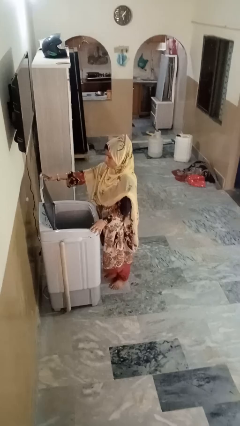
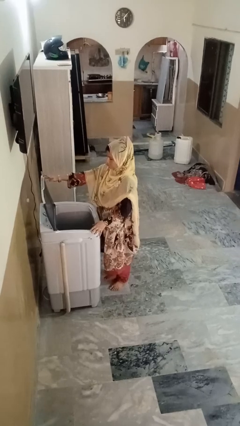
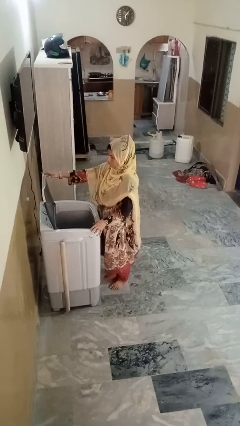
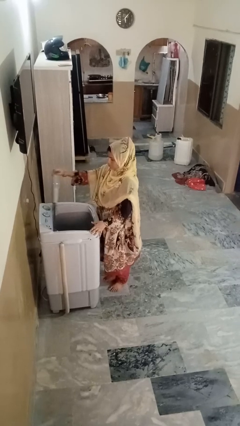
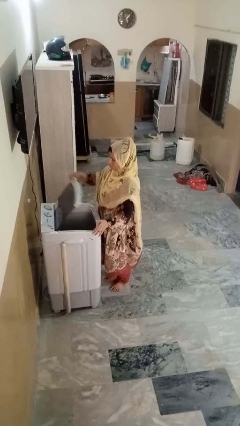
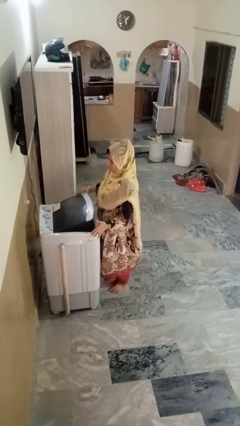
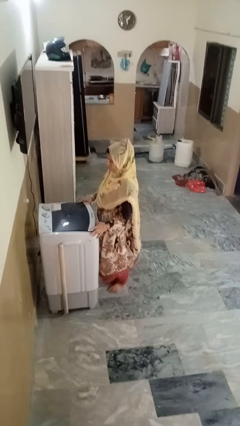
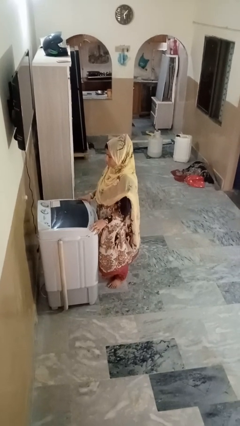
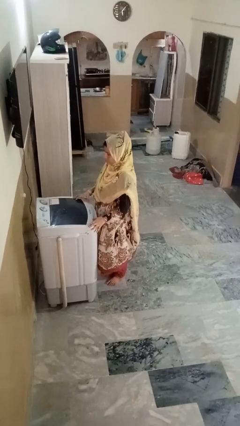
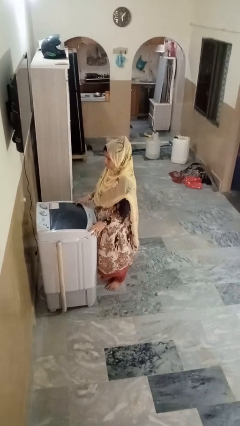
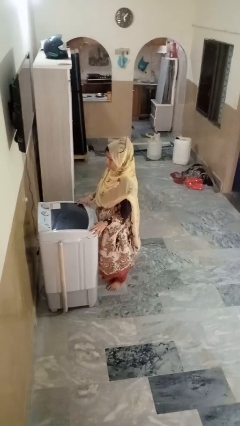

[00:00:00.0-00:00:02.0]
person closes clothes washer

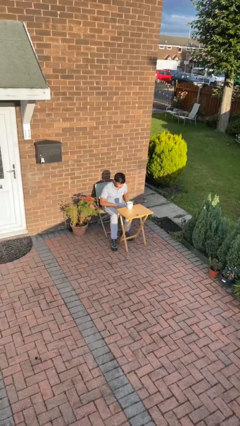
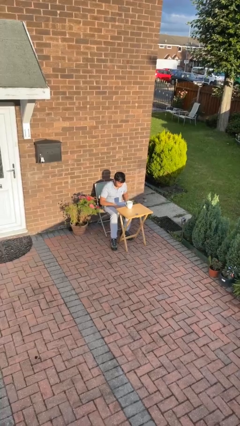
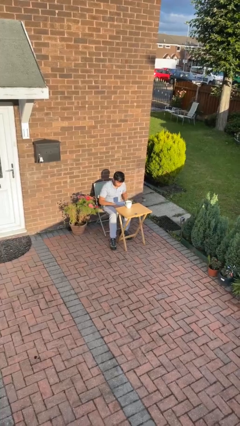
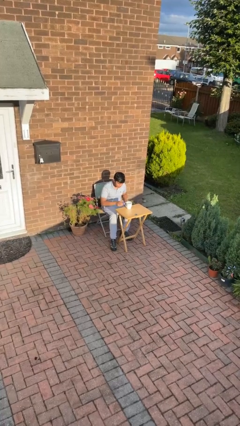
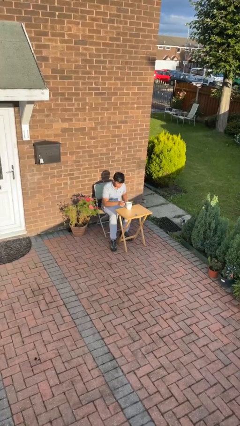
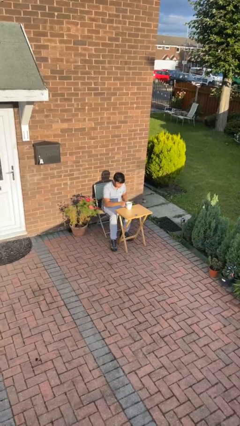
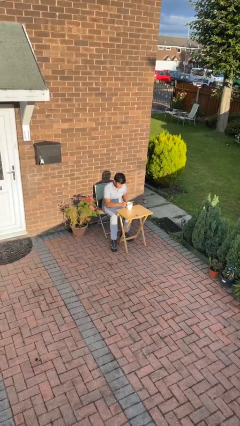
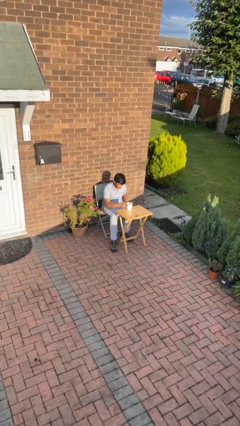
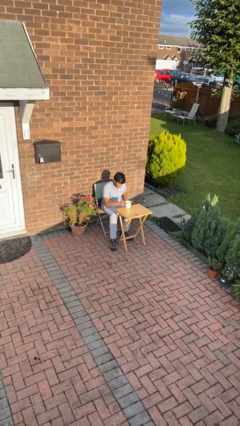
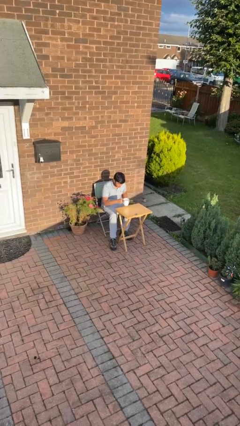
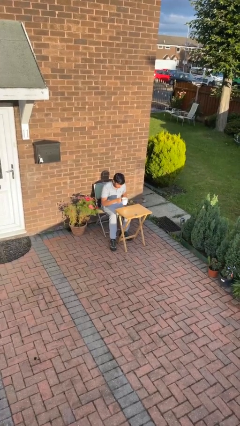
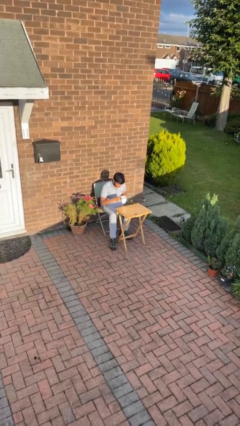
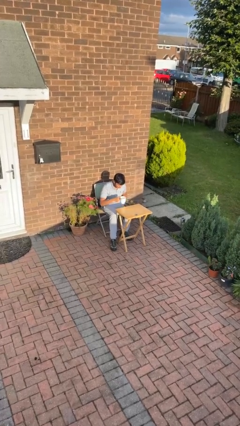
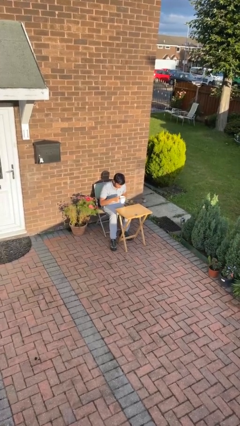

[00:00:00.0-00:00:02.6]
person picks up object from table

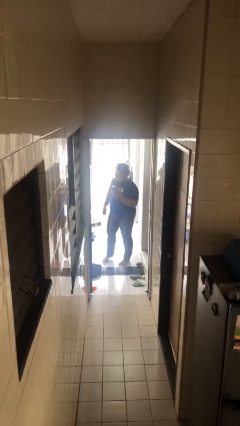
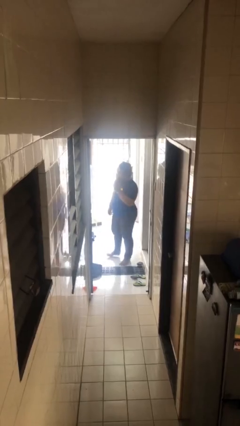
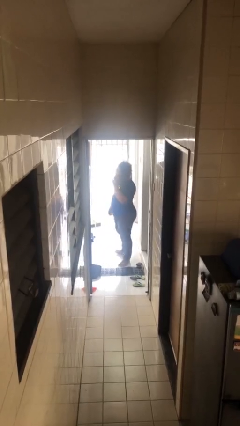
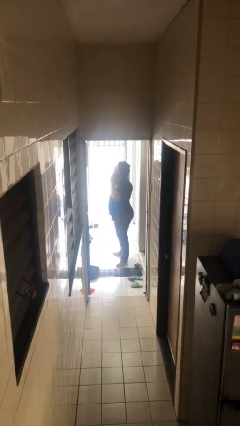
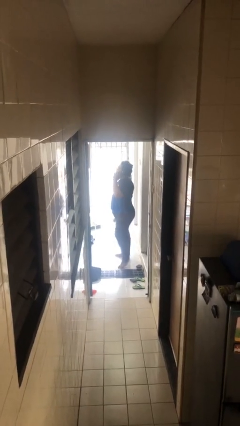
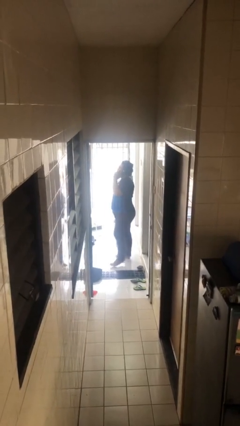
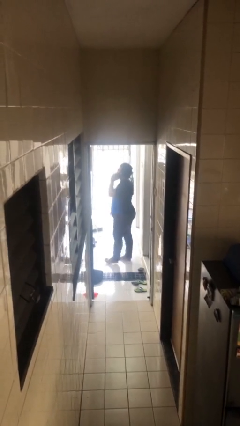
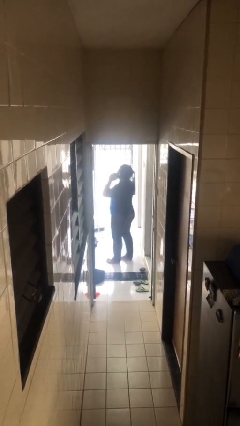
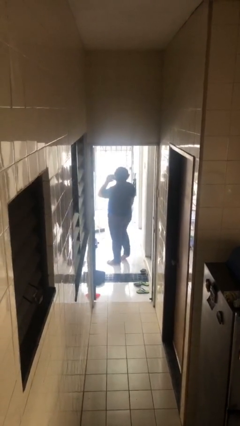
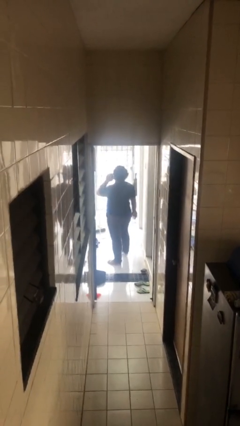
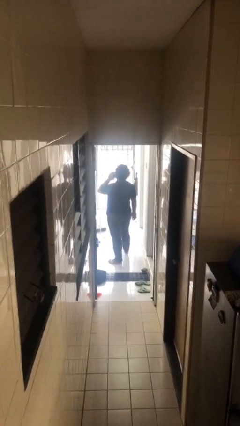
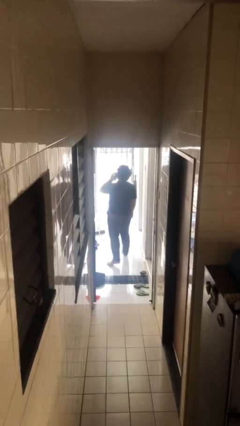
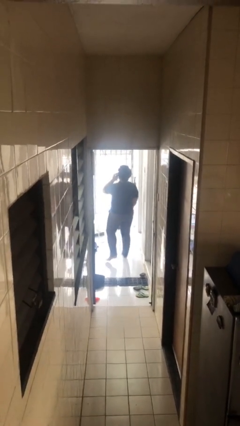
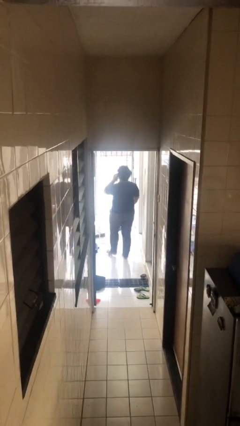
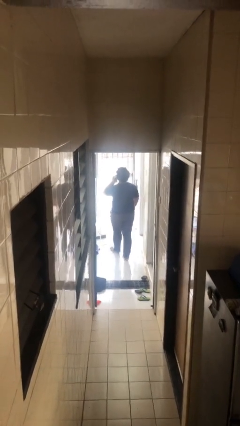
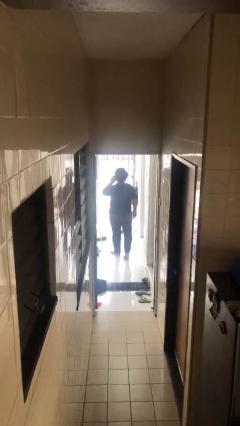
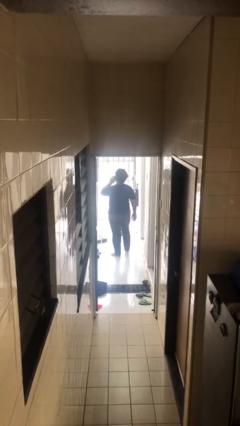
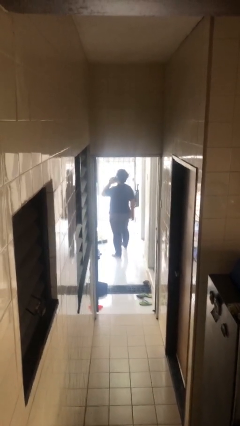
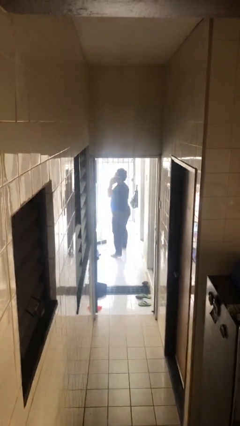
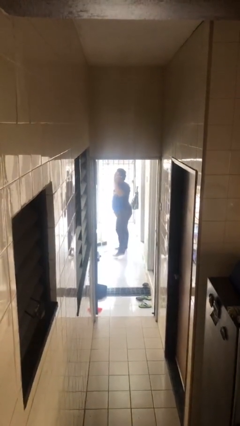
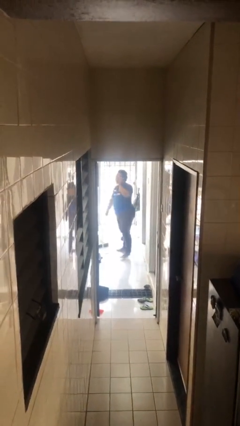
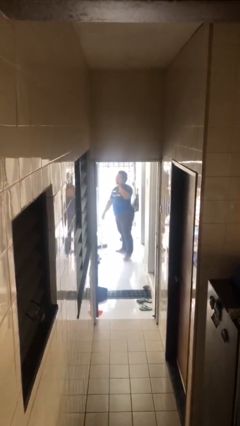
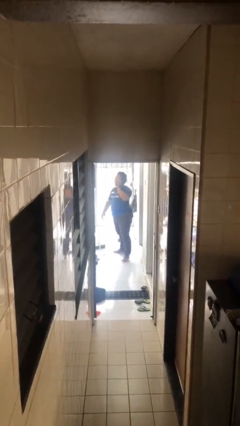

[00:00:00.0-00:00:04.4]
person talks on phone

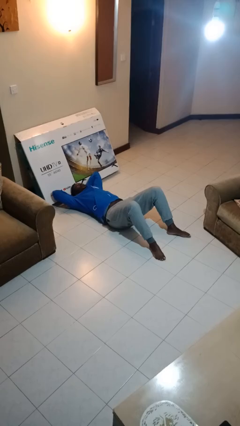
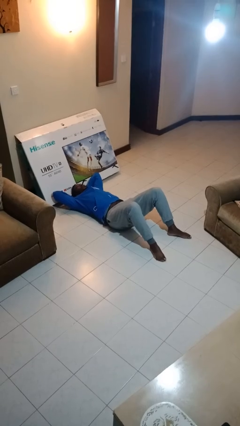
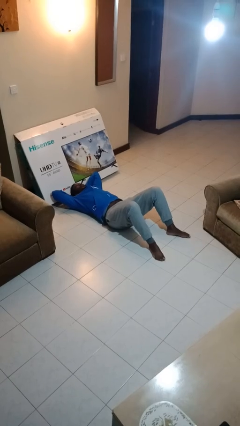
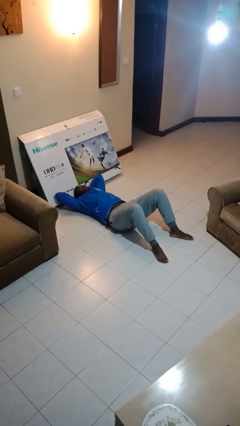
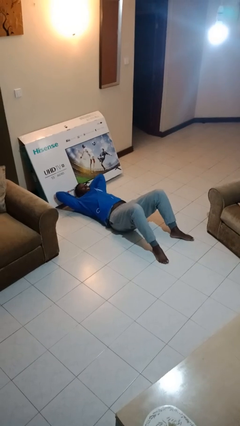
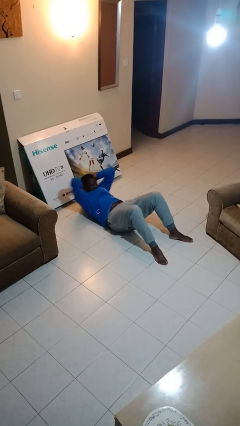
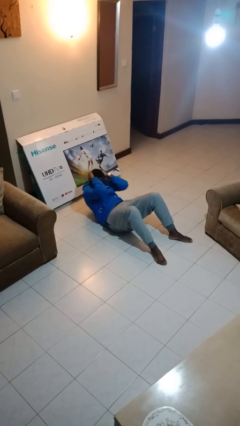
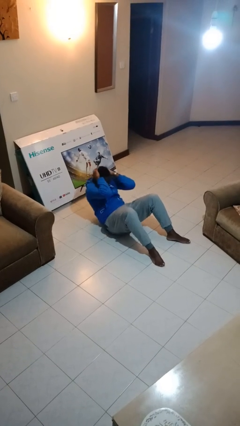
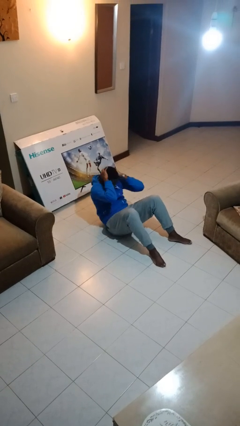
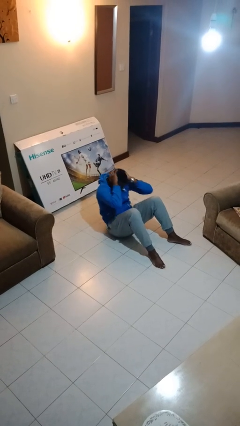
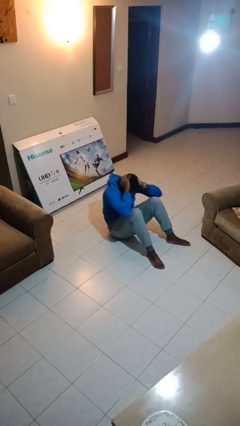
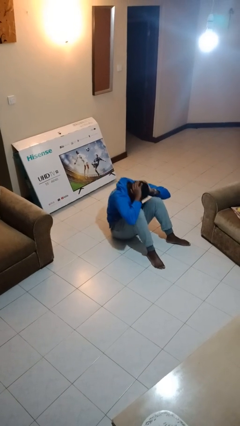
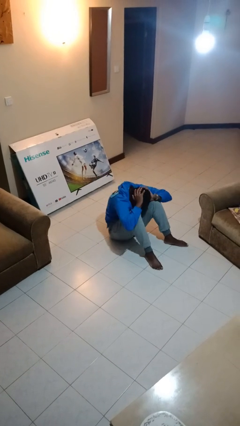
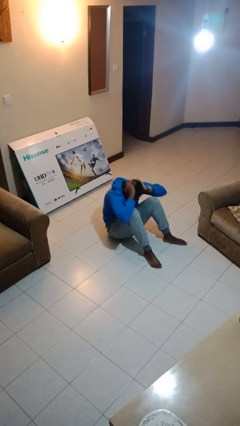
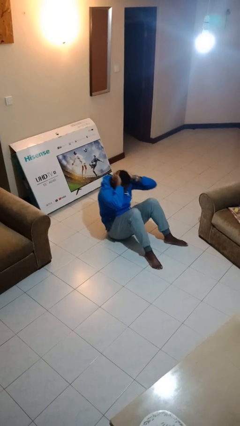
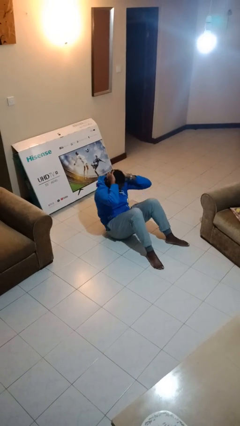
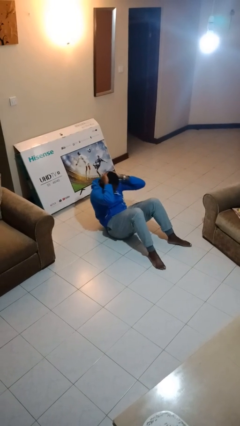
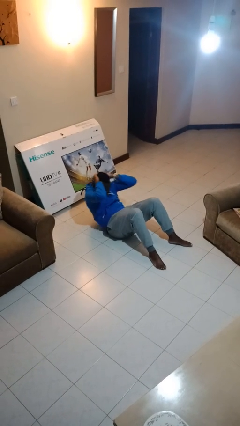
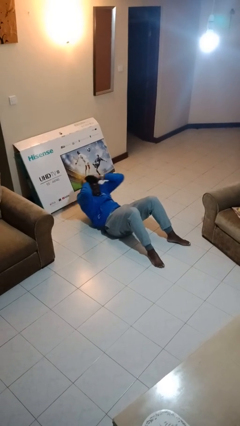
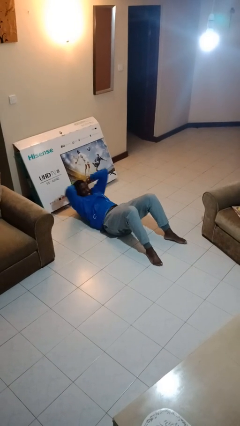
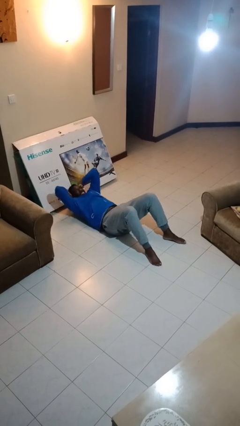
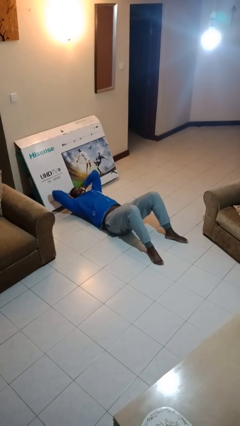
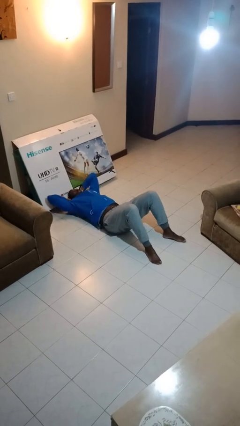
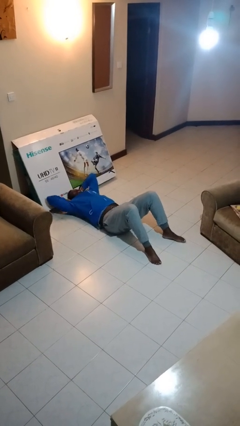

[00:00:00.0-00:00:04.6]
person exercises with situp

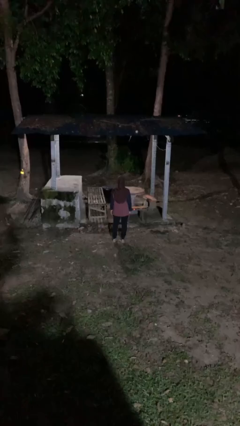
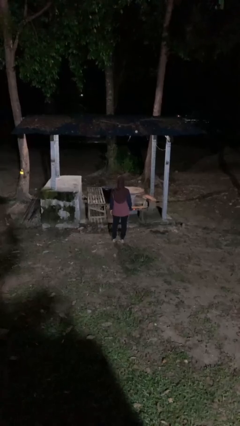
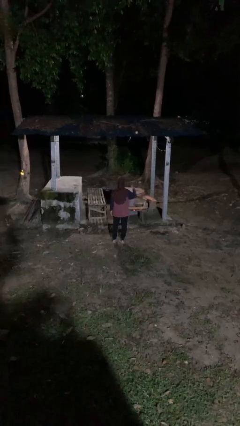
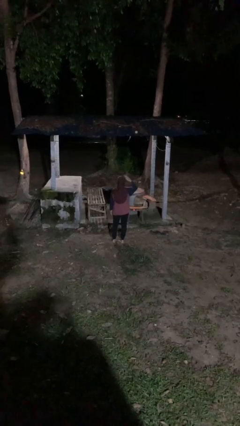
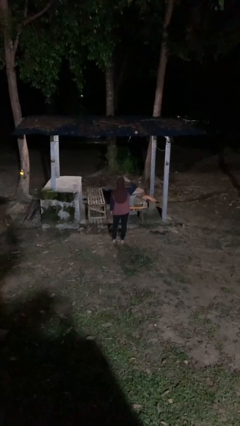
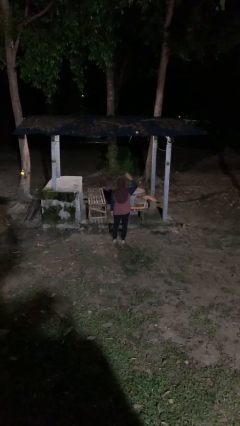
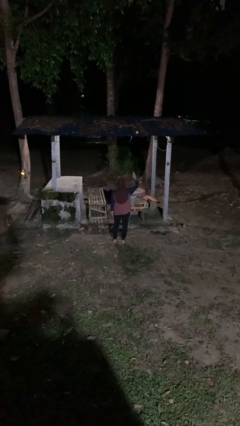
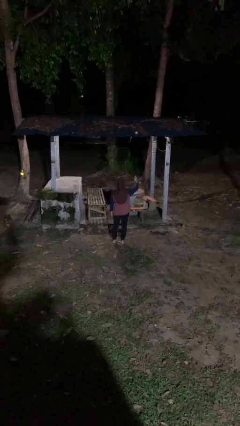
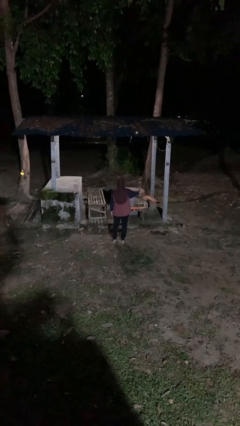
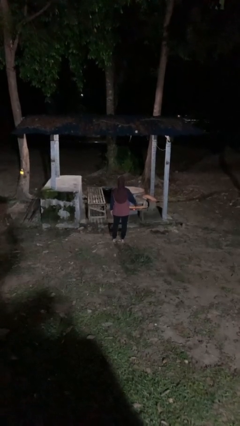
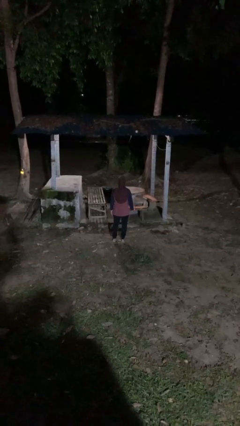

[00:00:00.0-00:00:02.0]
person salutes

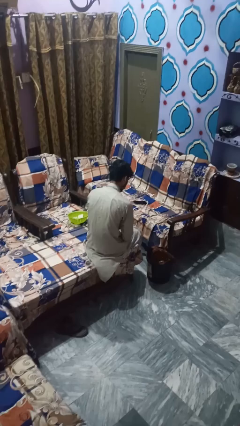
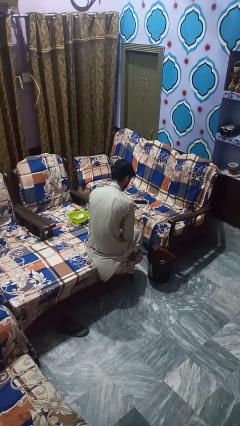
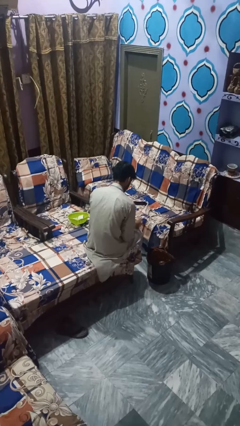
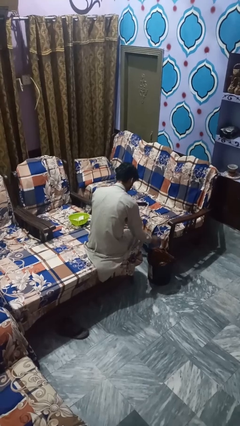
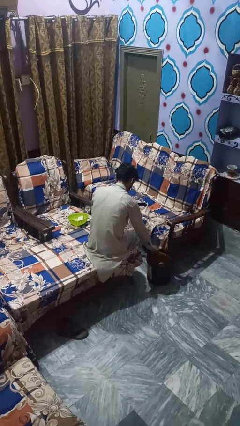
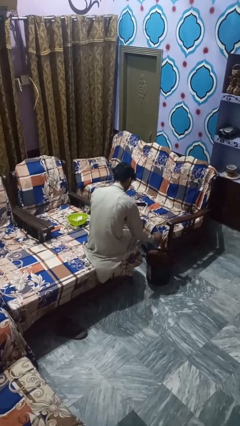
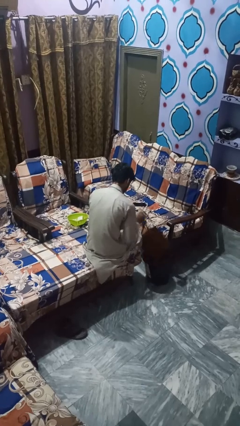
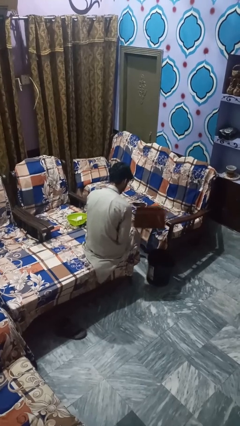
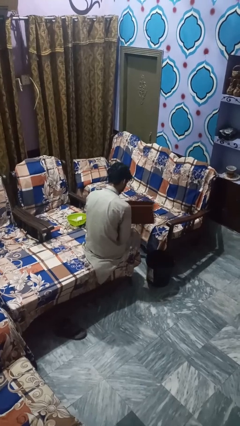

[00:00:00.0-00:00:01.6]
person takes object from basket

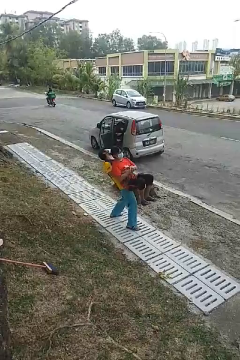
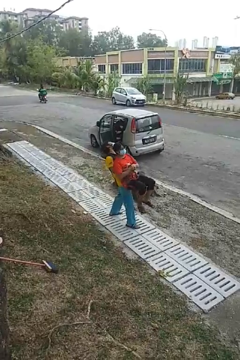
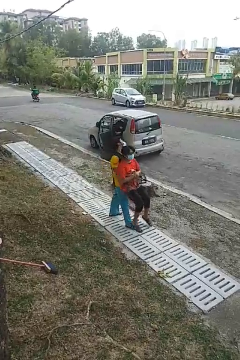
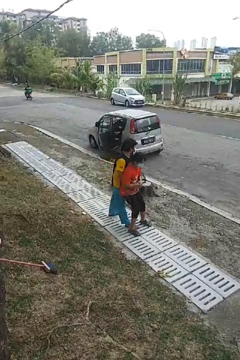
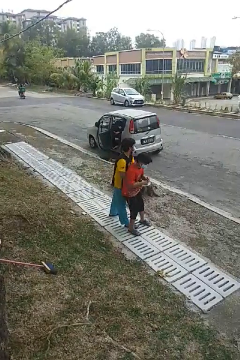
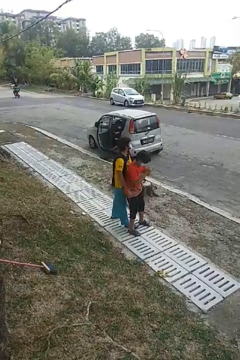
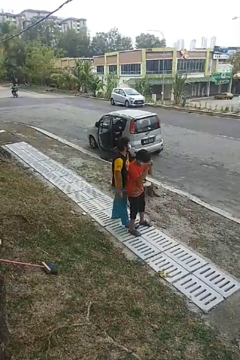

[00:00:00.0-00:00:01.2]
person puts down person
